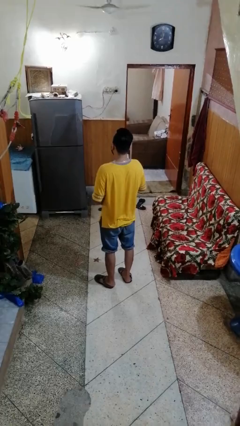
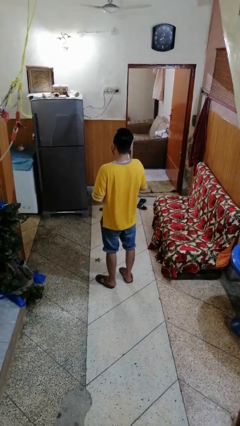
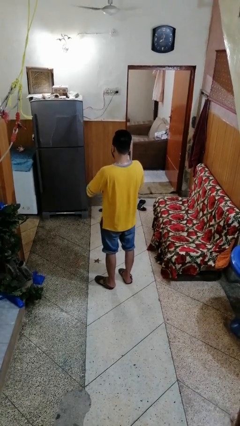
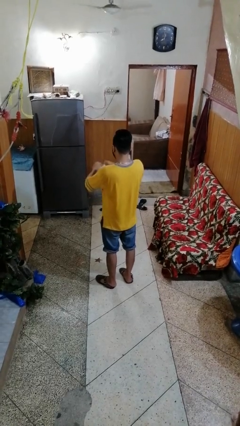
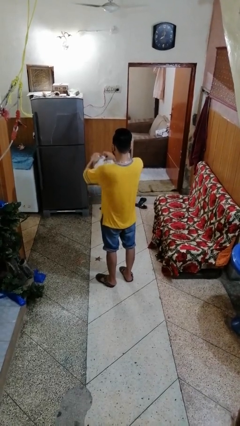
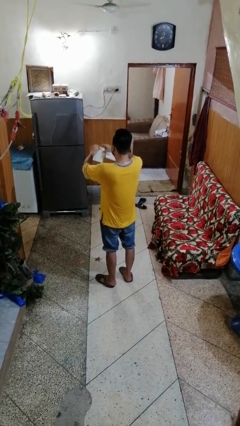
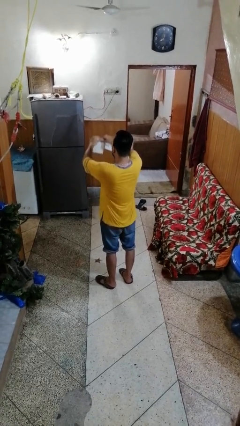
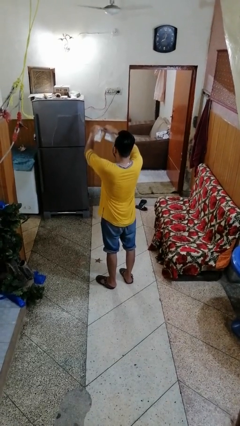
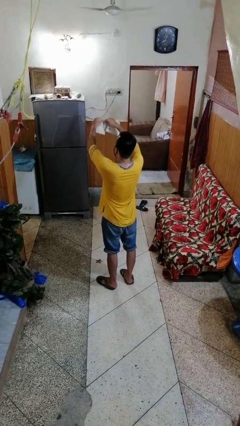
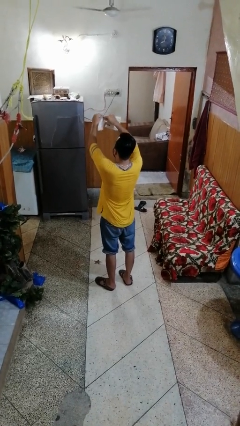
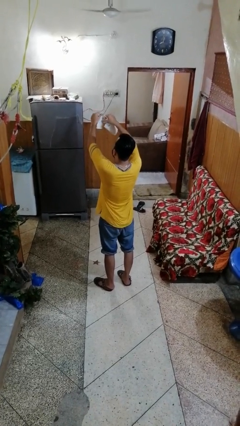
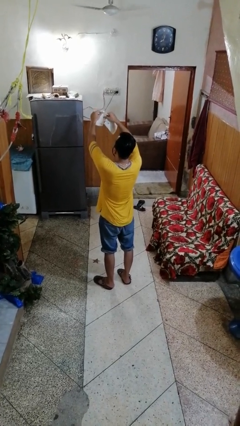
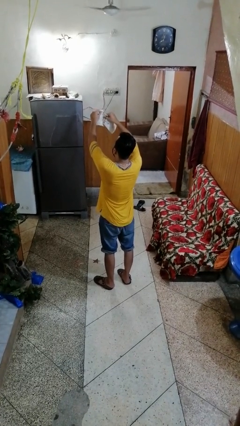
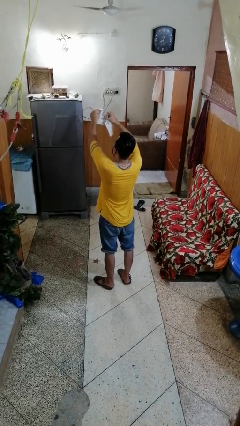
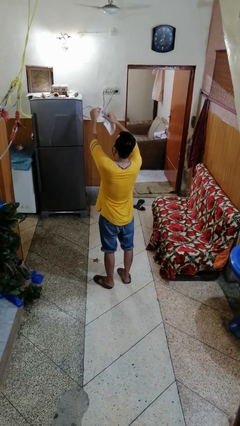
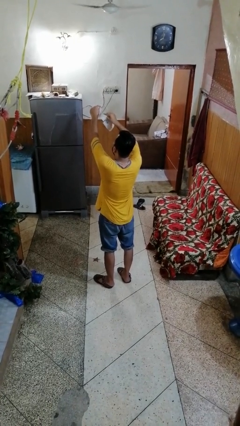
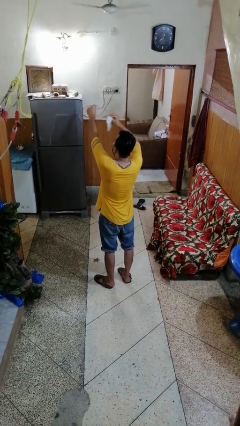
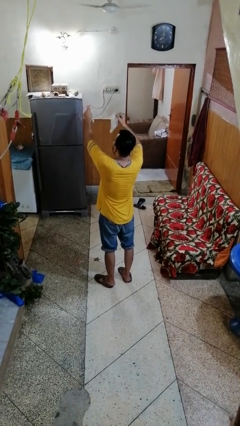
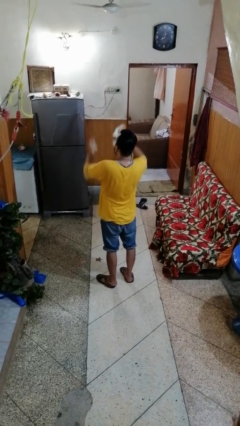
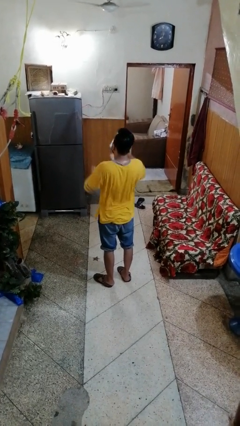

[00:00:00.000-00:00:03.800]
person tears paper

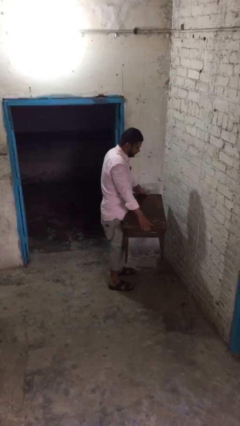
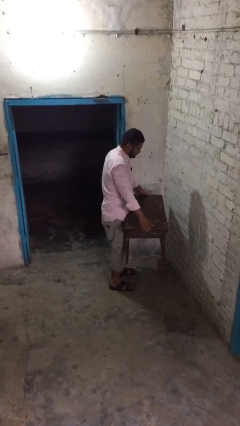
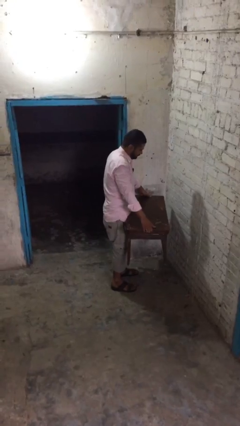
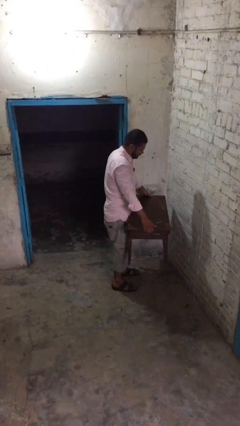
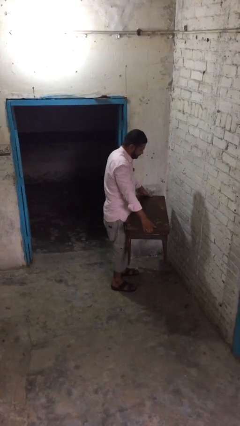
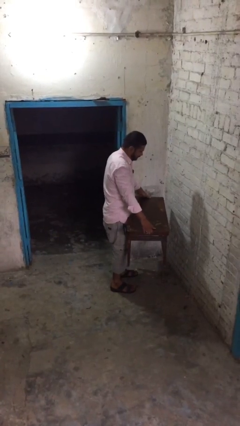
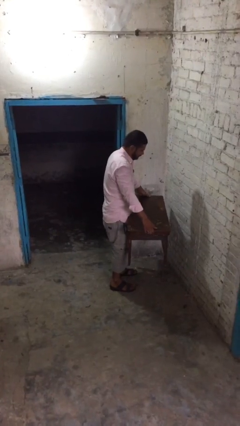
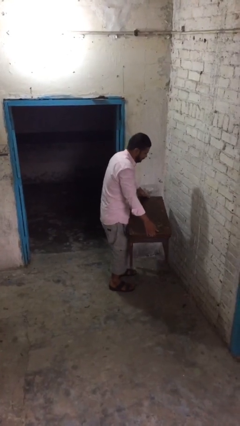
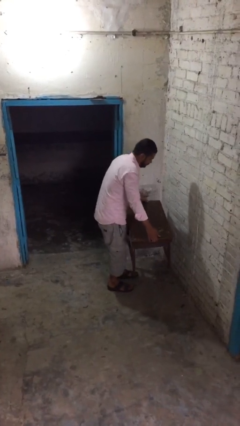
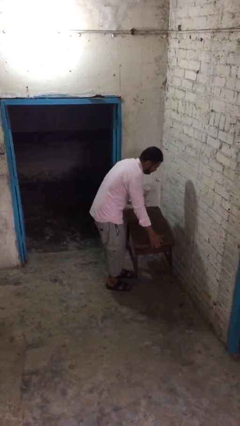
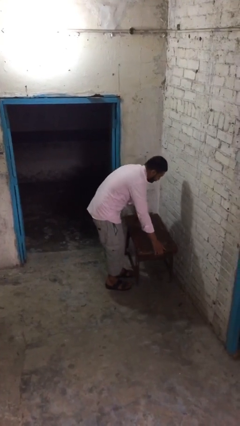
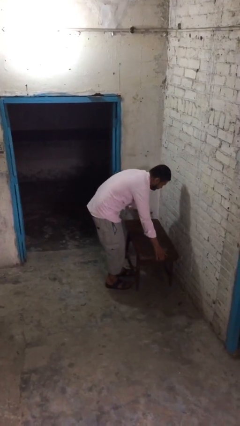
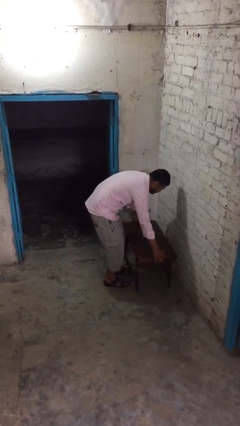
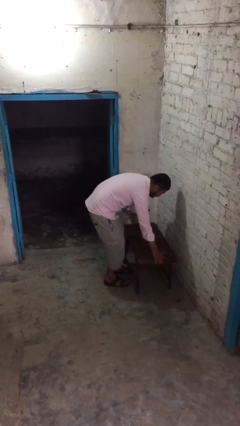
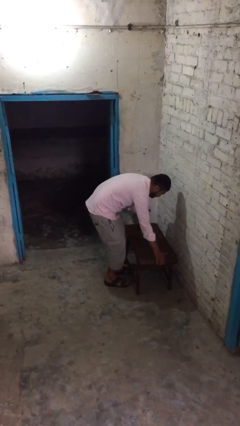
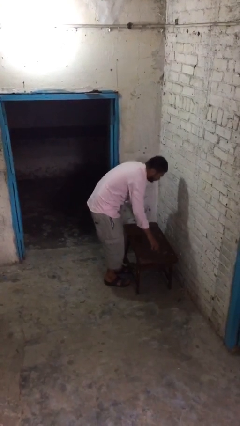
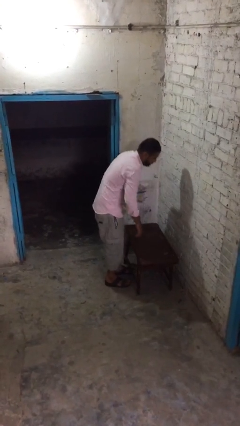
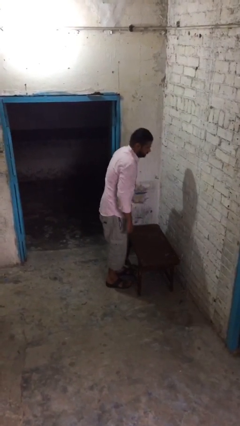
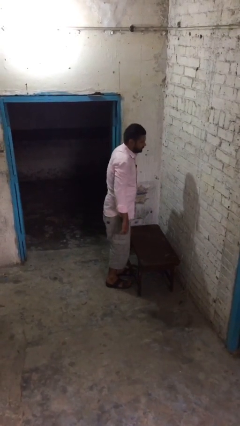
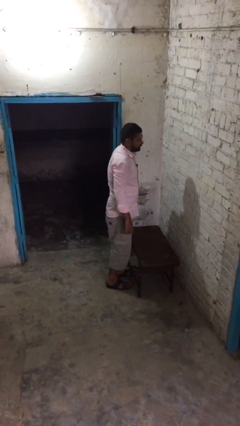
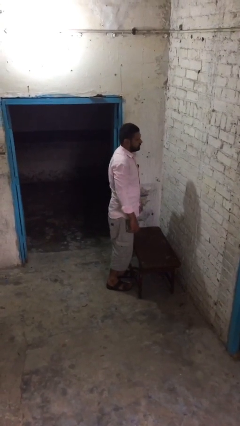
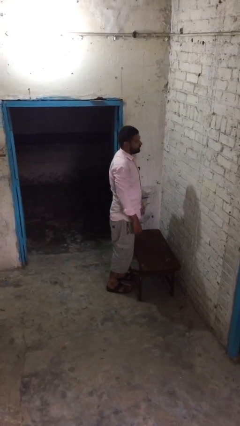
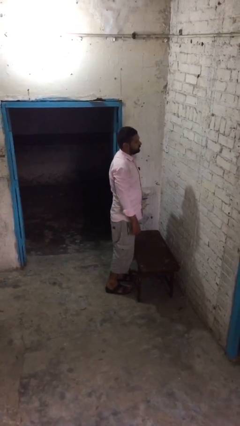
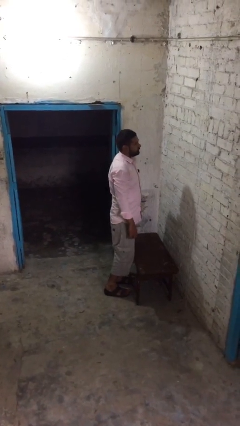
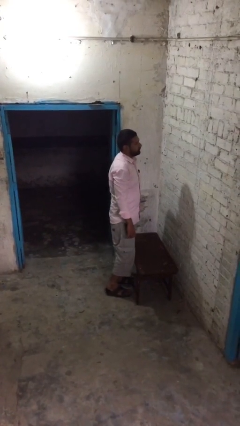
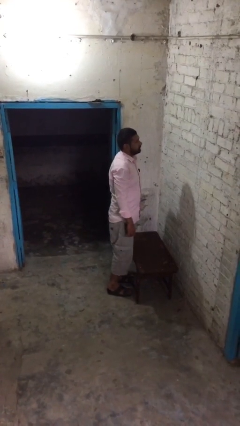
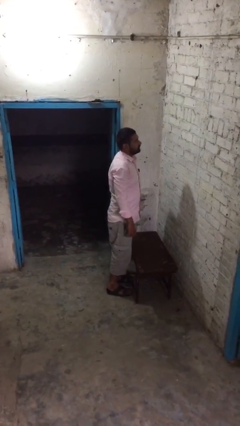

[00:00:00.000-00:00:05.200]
person puts down object on floor

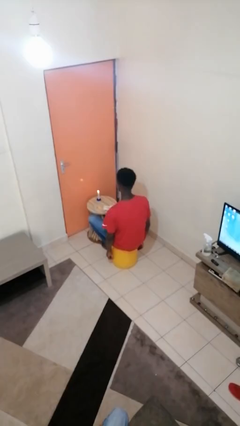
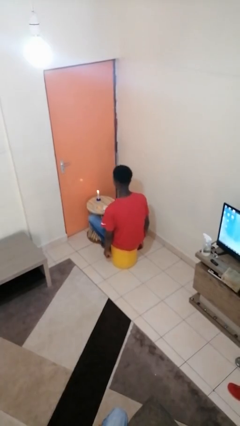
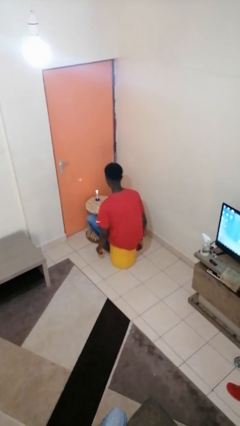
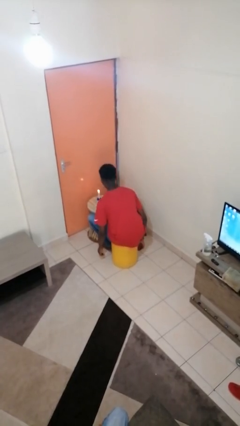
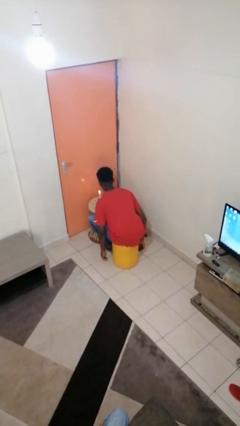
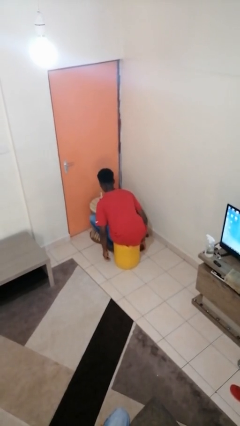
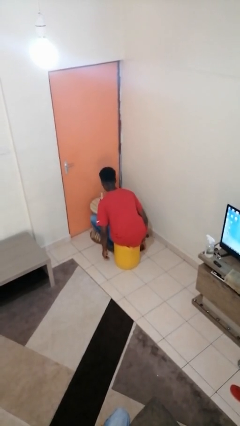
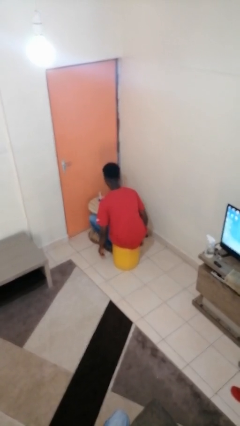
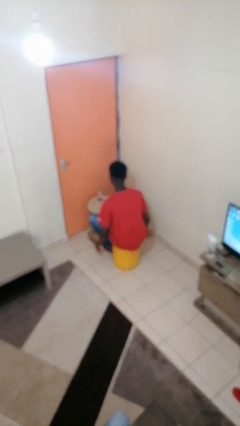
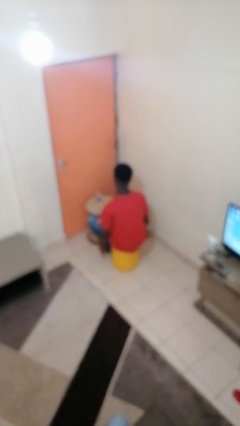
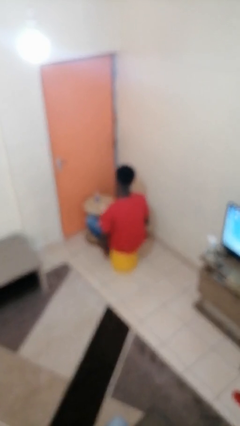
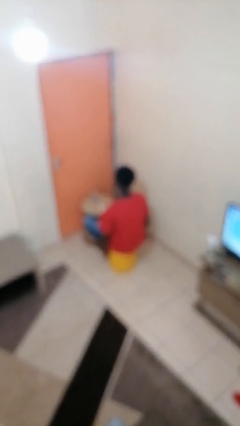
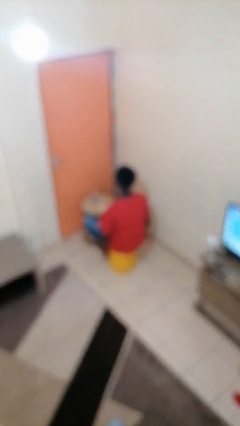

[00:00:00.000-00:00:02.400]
person extinguishes candle

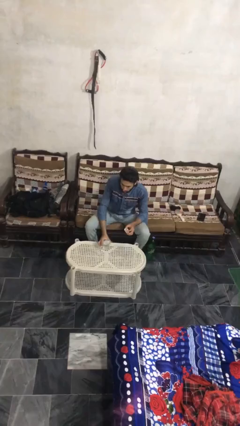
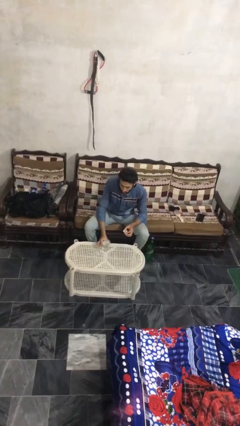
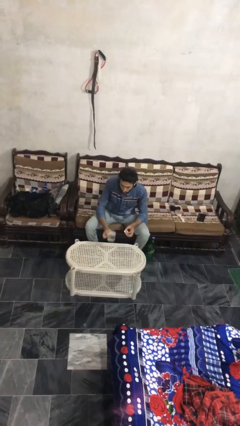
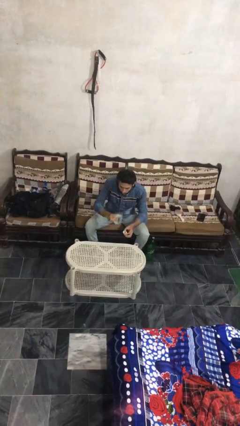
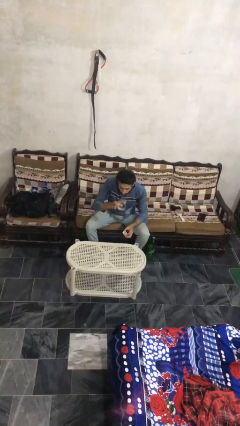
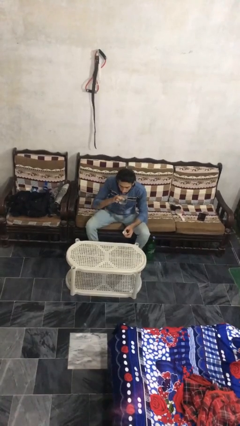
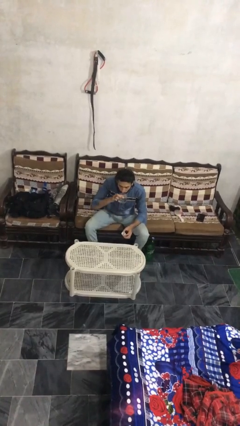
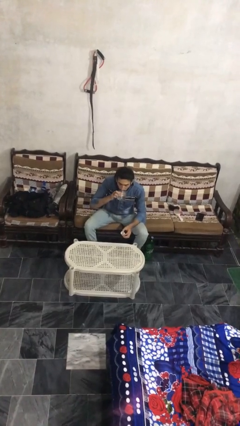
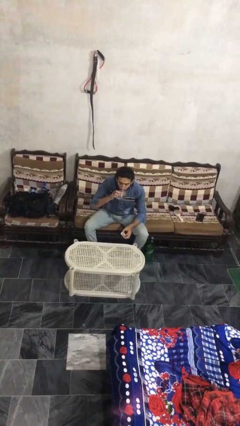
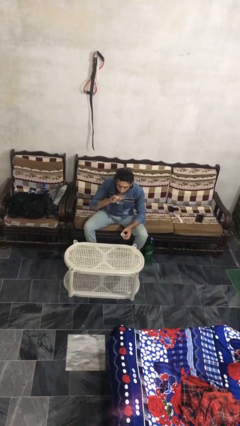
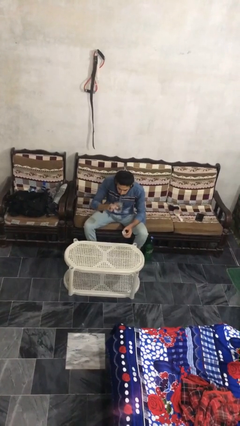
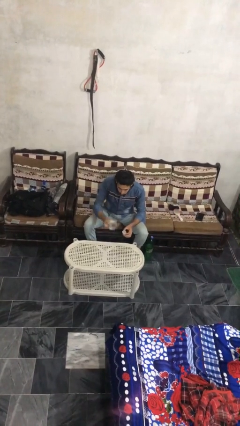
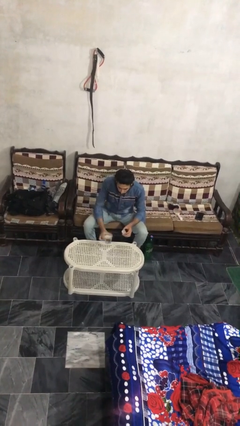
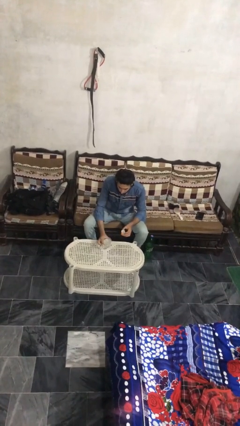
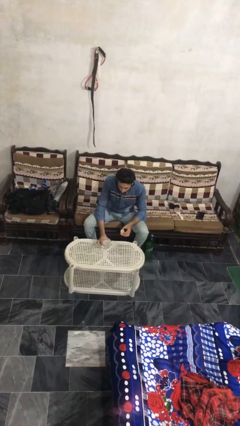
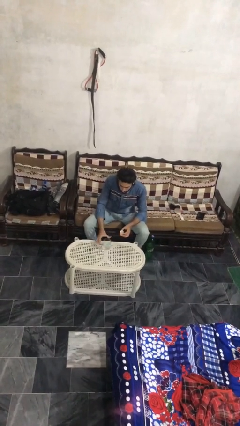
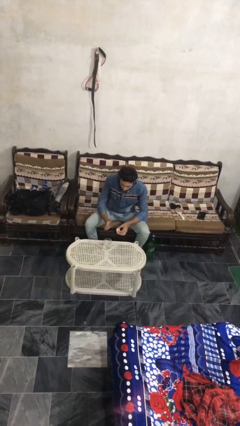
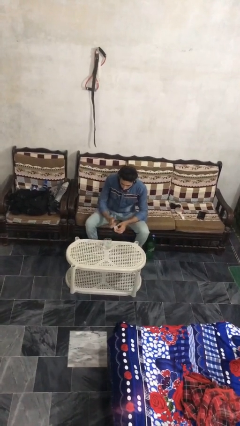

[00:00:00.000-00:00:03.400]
person drinks from cup

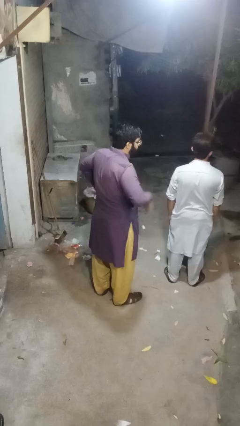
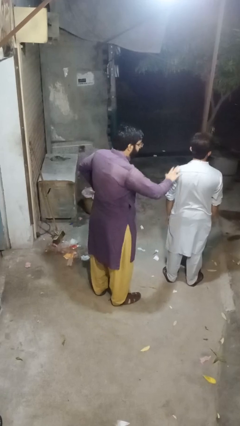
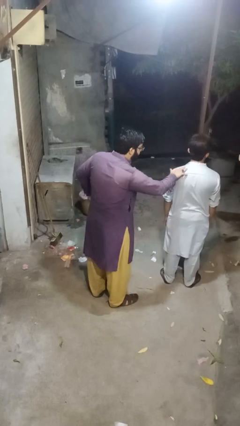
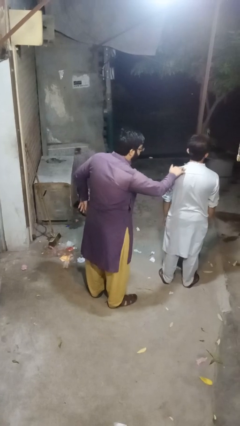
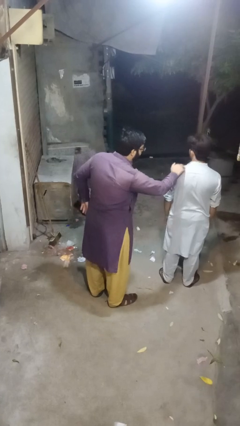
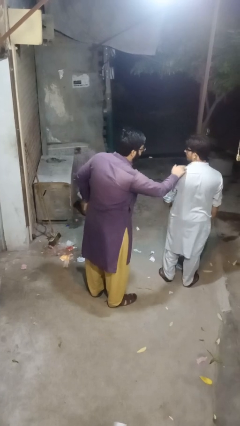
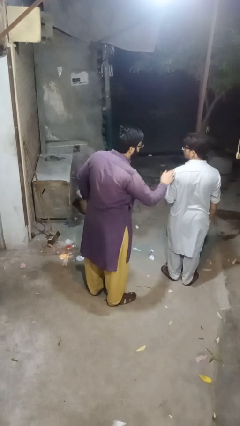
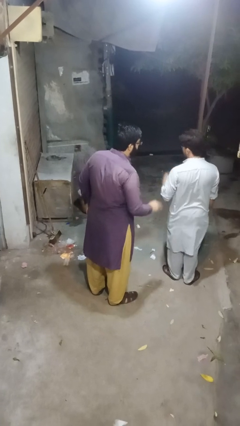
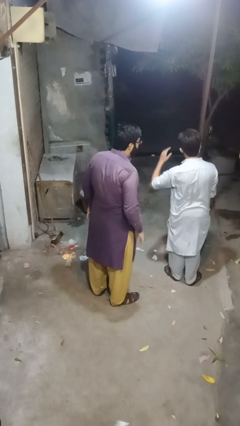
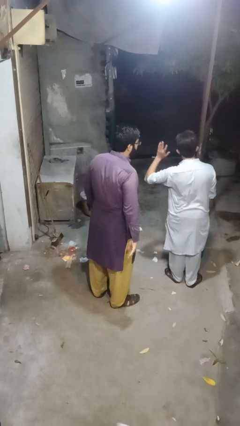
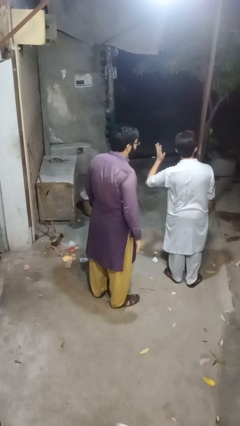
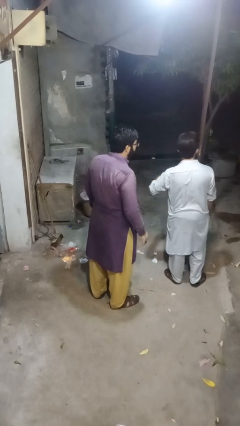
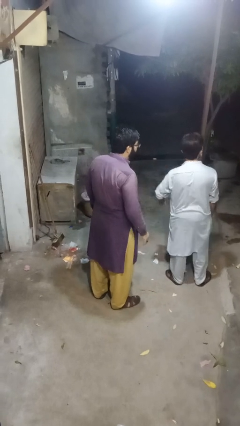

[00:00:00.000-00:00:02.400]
person touches back of person

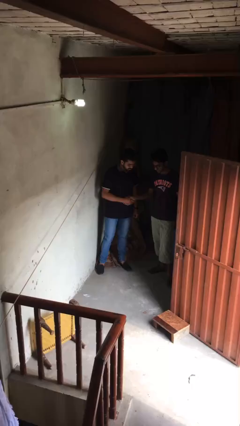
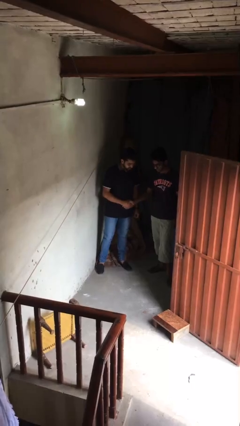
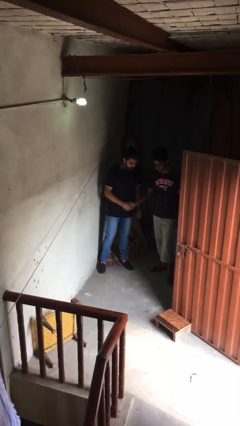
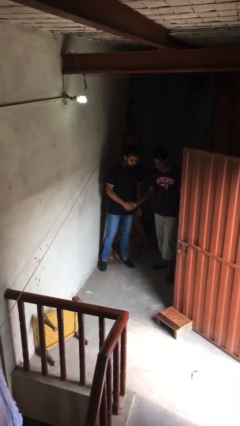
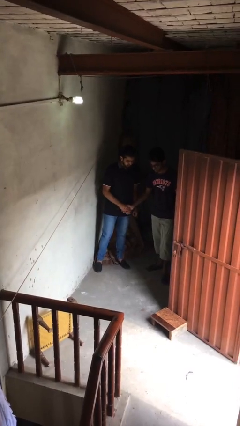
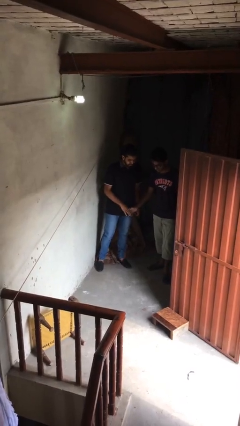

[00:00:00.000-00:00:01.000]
person shakes hand
